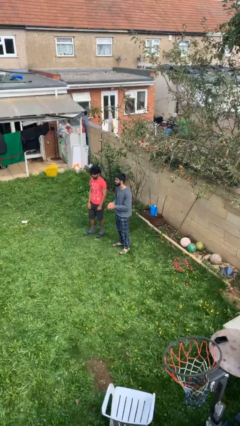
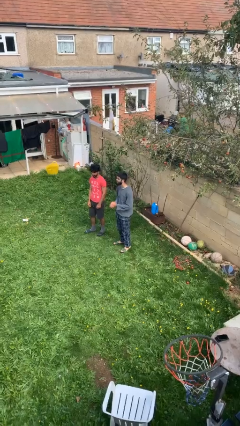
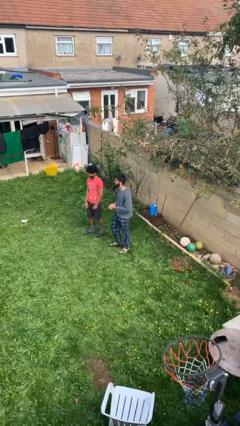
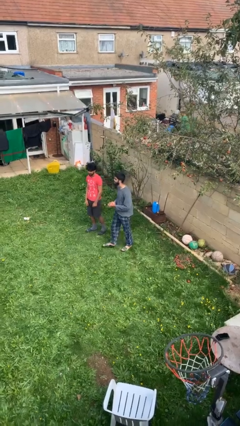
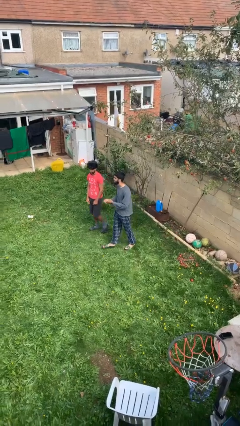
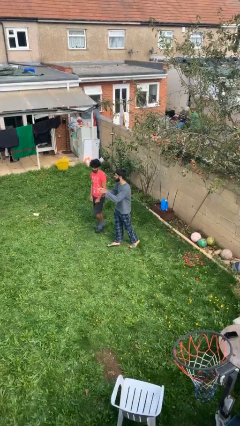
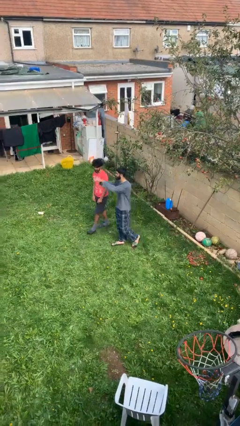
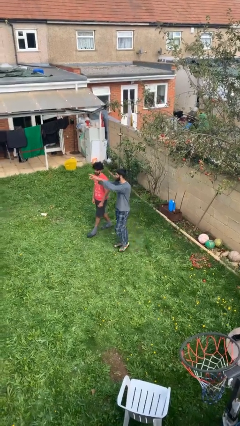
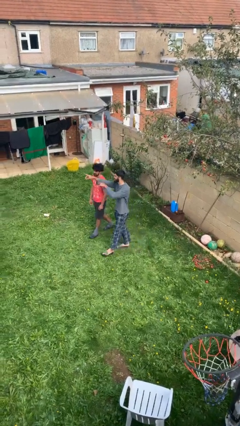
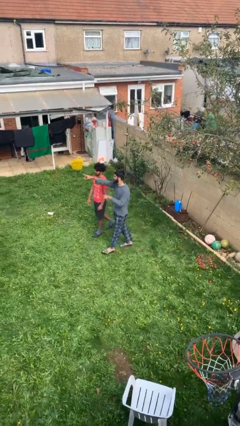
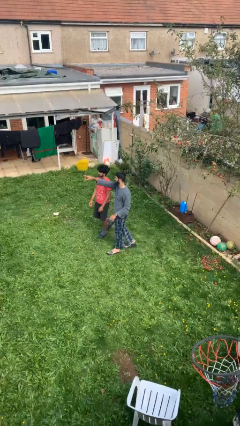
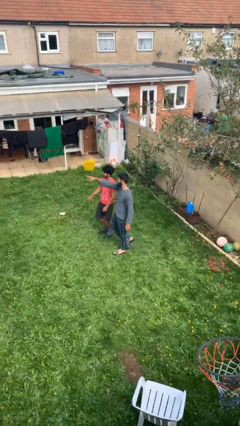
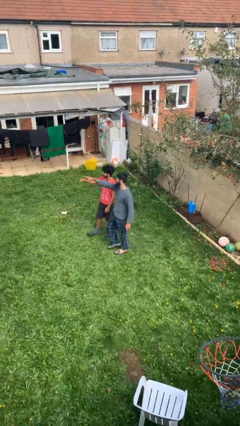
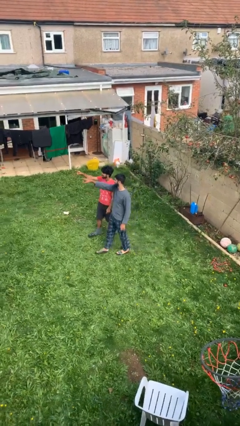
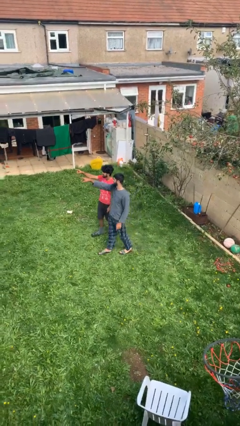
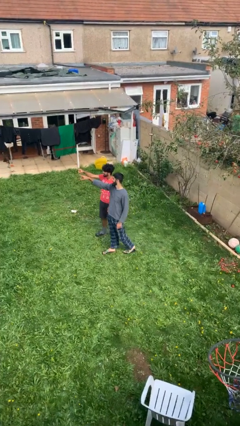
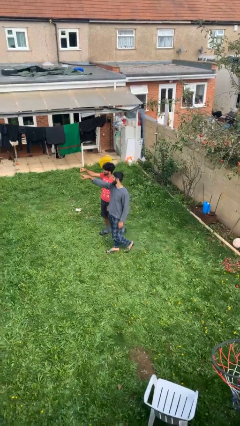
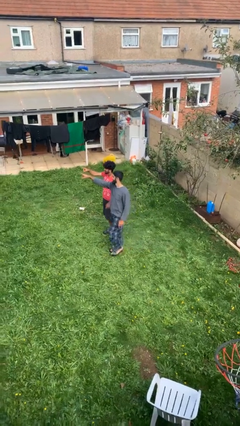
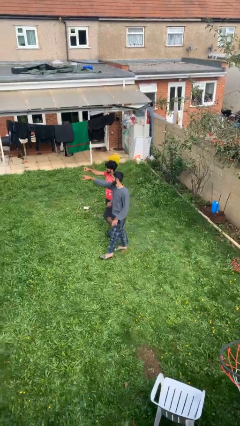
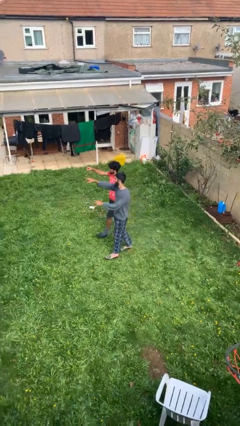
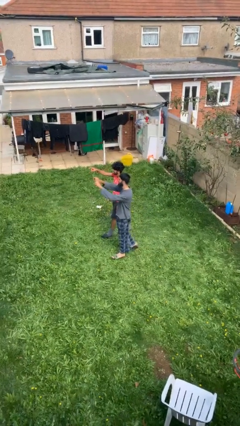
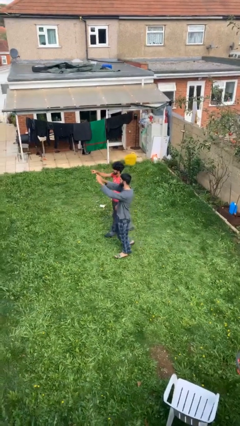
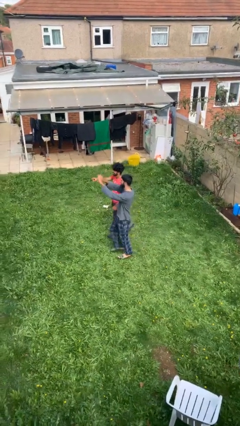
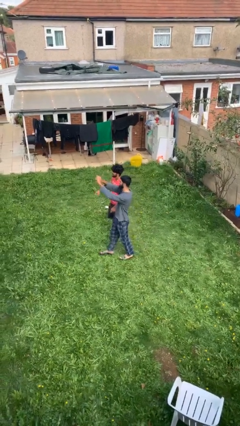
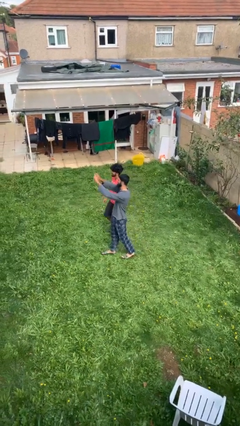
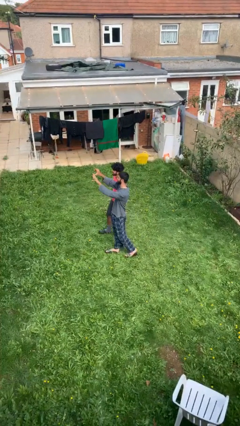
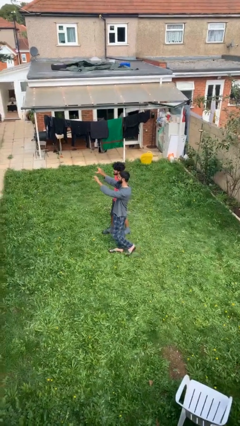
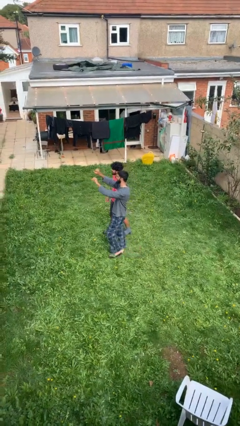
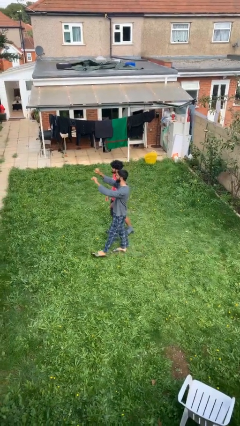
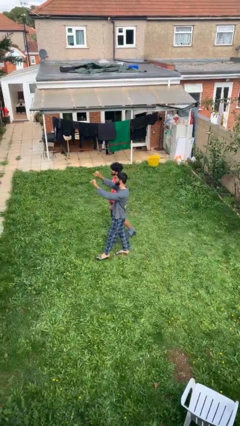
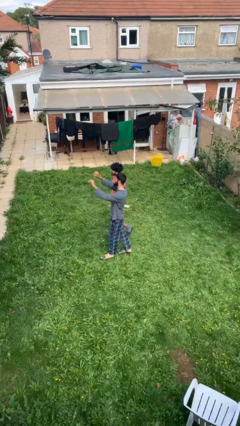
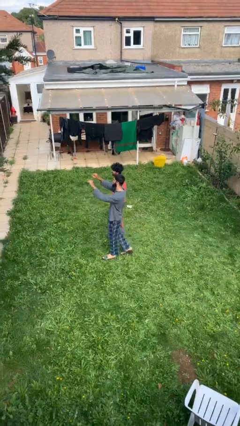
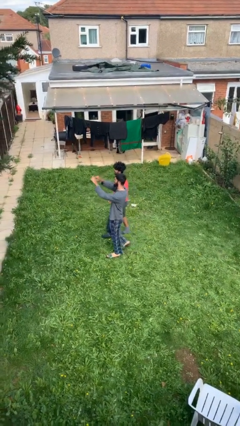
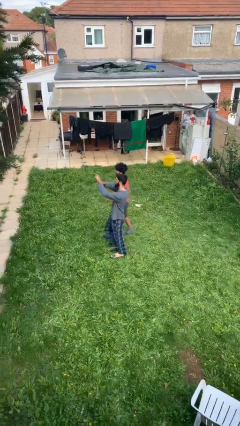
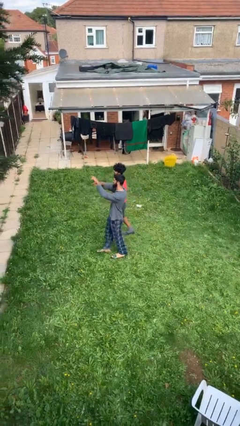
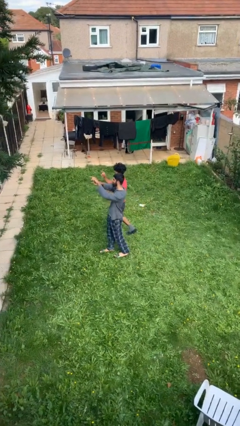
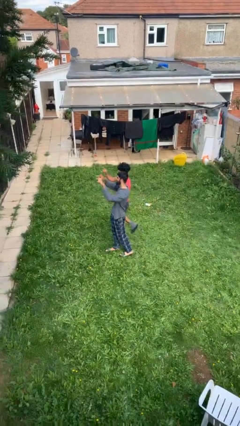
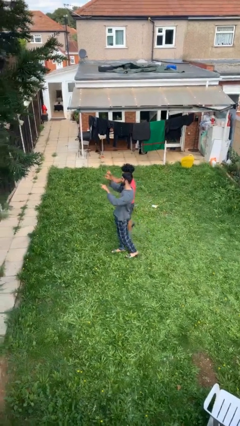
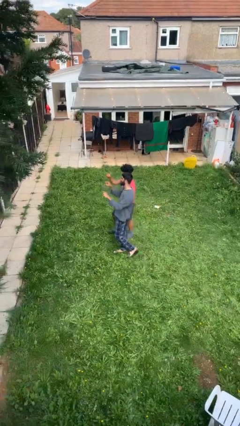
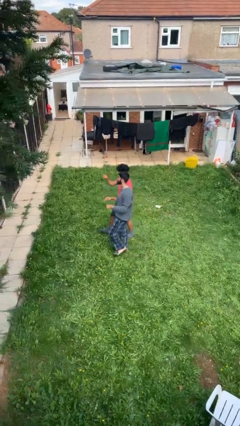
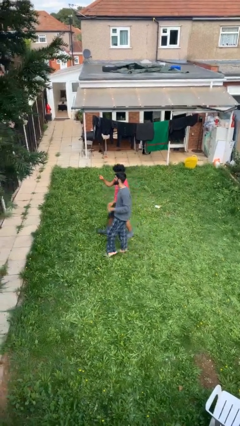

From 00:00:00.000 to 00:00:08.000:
person talks to person

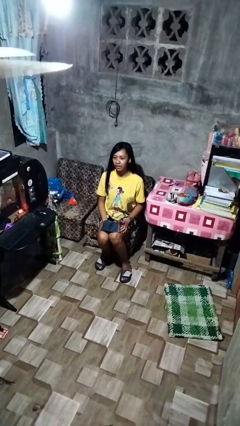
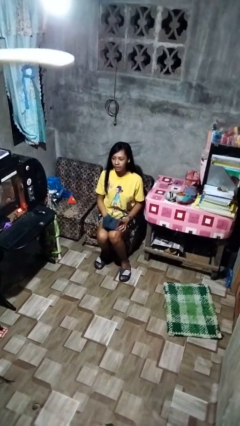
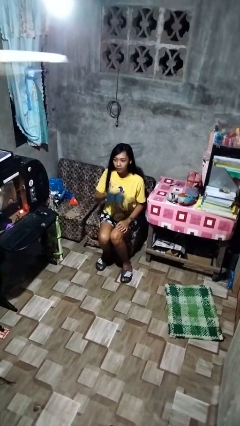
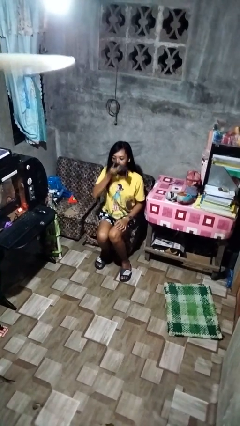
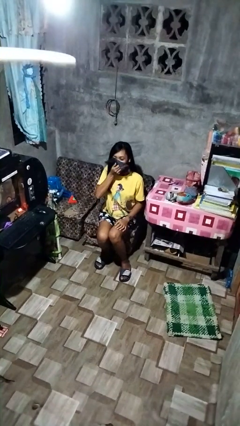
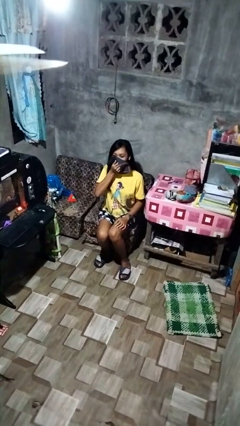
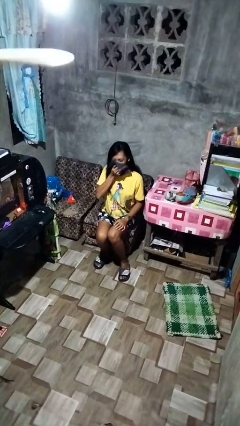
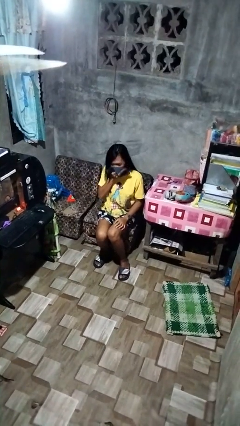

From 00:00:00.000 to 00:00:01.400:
person blows nose

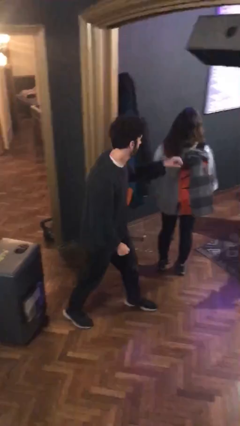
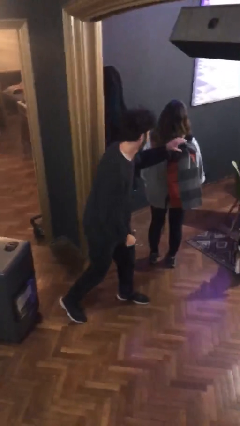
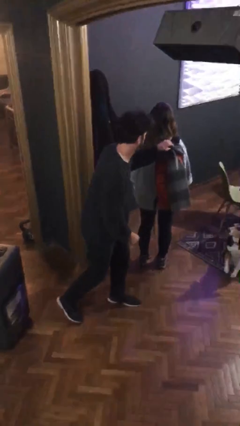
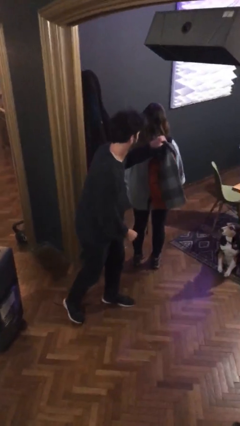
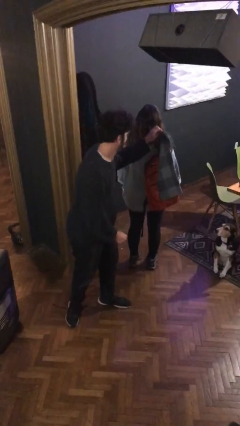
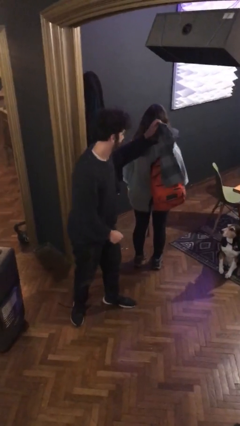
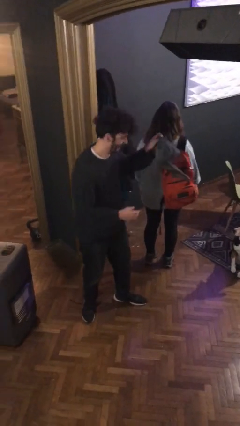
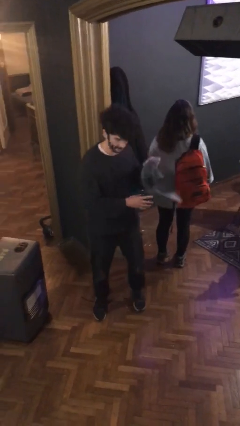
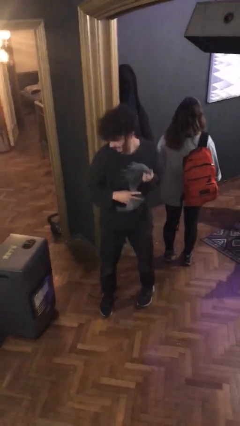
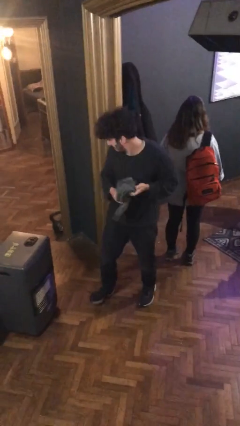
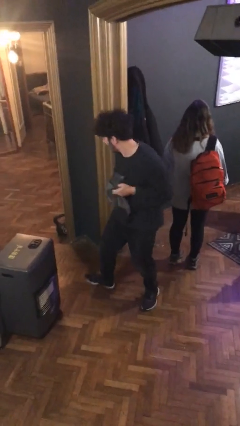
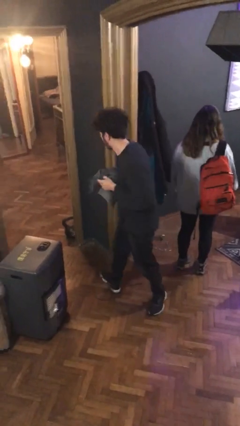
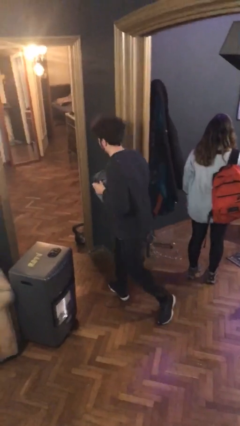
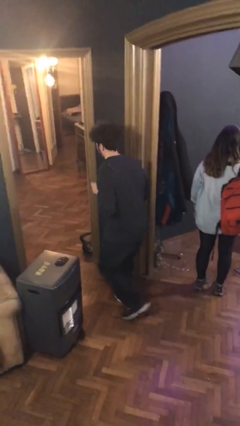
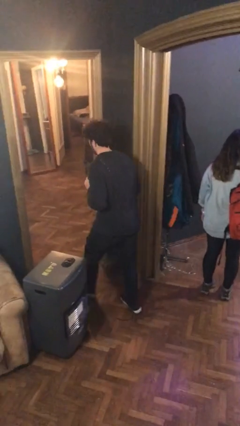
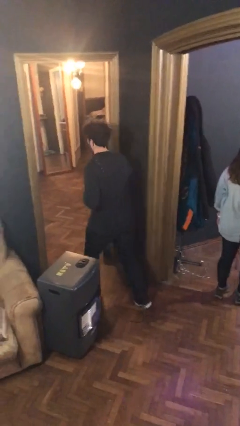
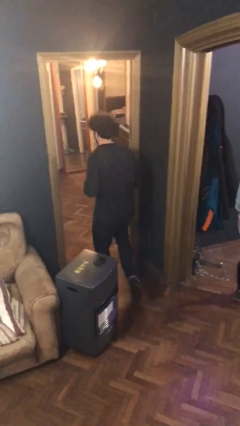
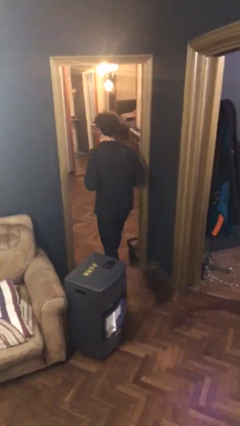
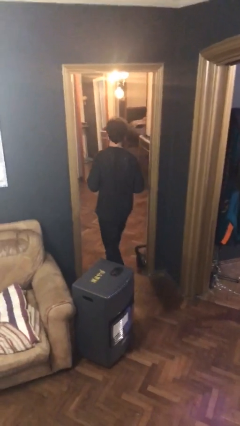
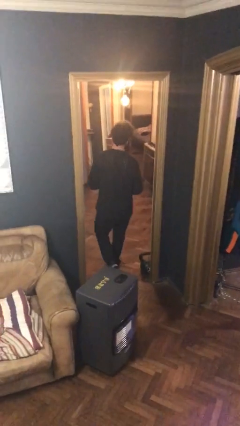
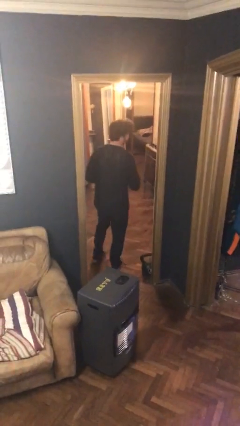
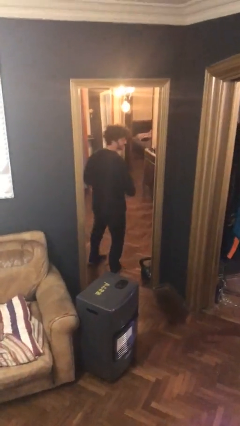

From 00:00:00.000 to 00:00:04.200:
person steals object from person

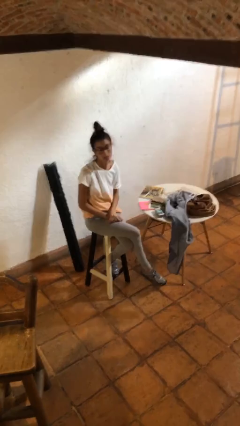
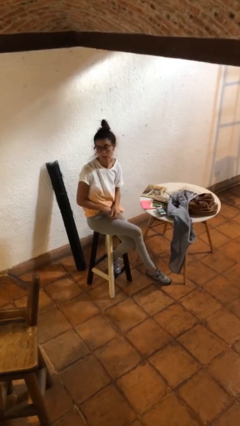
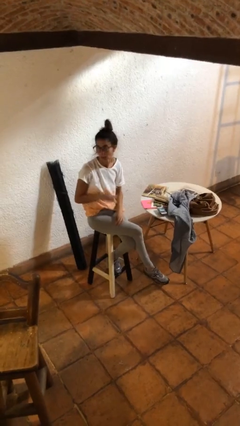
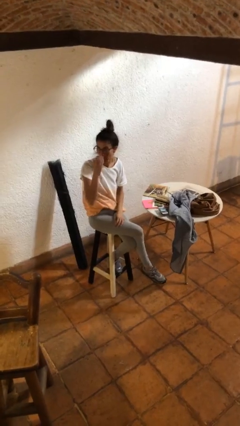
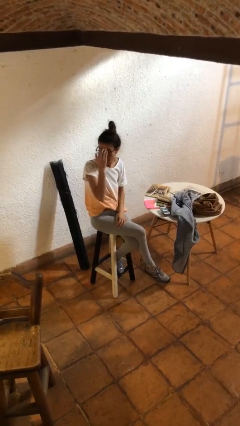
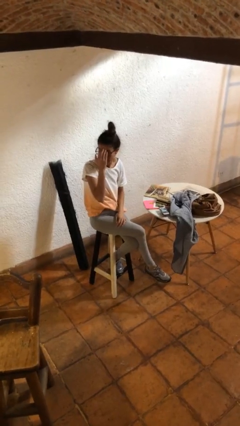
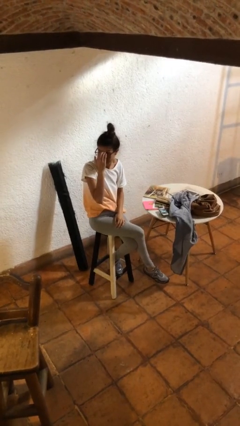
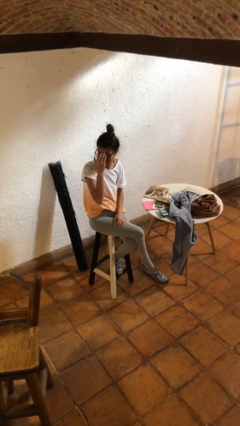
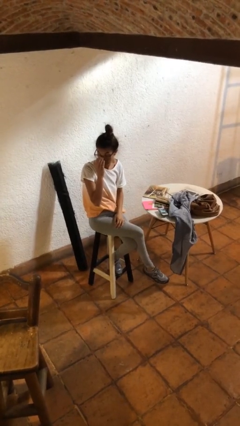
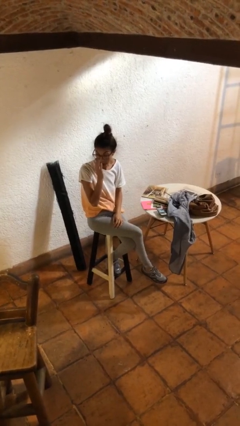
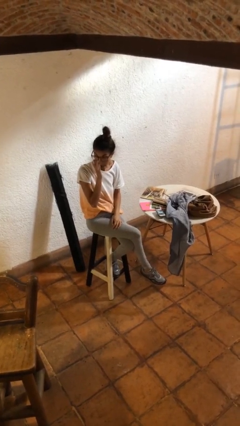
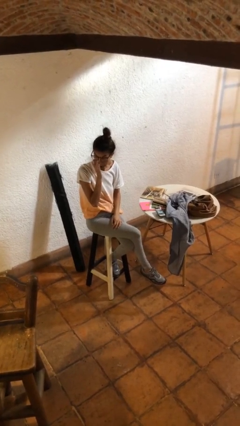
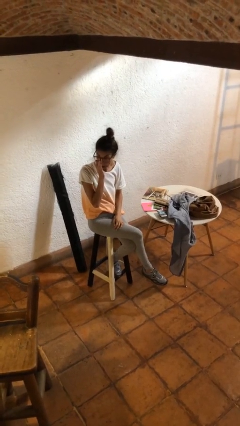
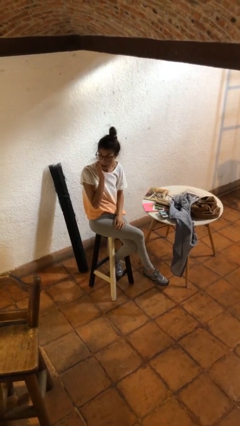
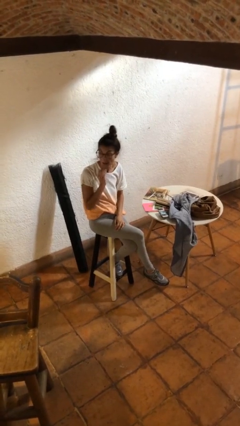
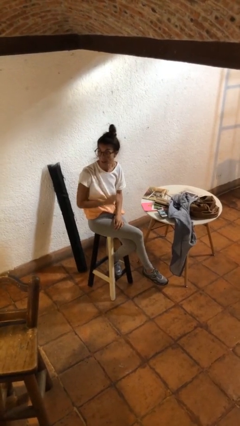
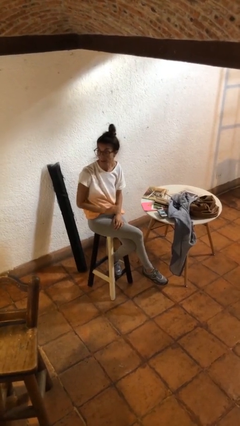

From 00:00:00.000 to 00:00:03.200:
person scratches face

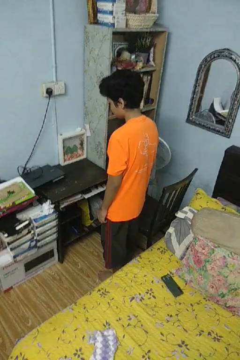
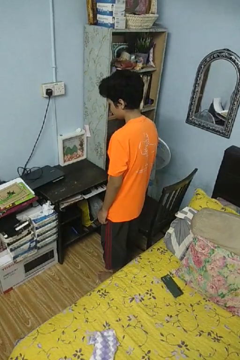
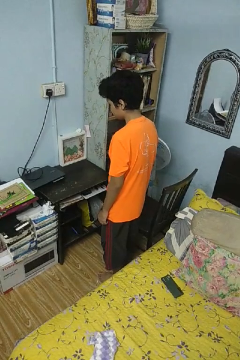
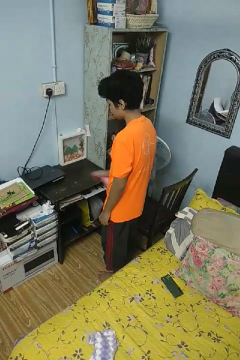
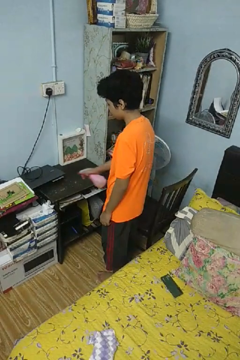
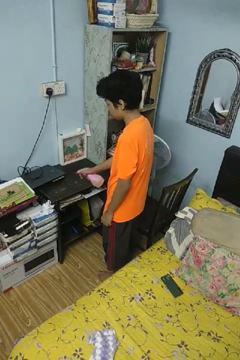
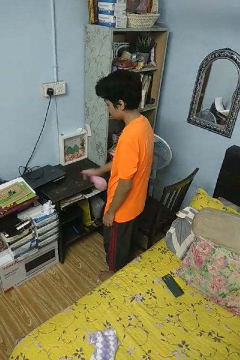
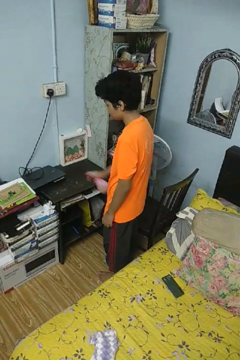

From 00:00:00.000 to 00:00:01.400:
person sprays from bottle
